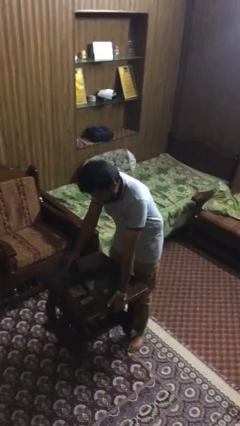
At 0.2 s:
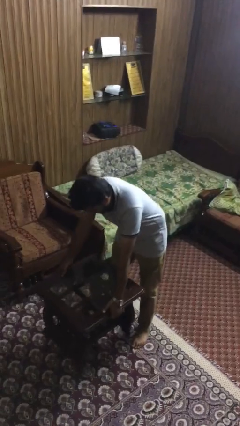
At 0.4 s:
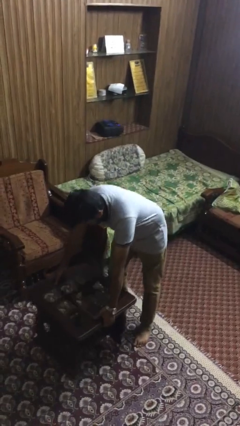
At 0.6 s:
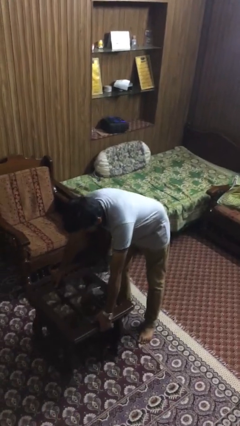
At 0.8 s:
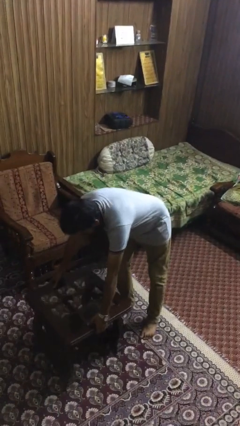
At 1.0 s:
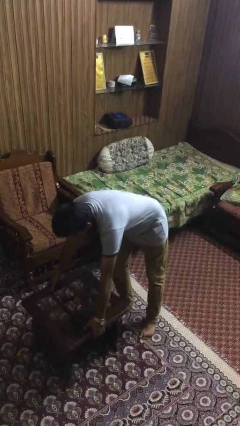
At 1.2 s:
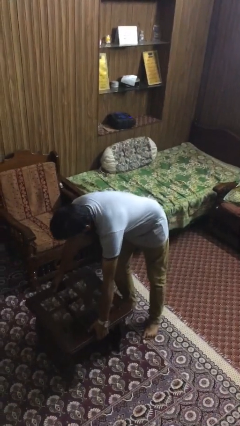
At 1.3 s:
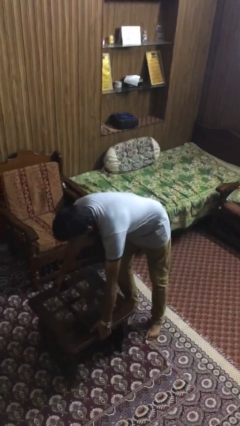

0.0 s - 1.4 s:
person puts down object on floor

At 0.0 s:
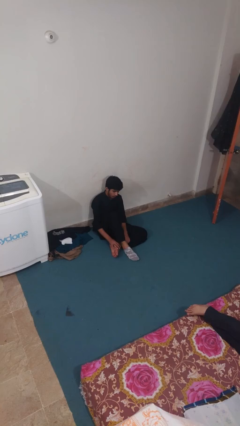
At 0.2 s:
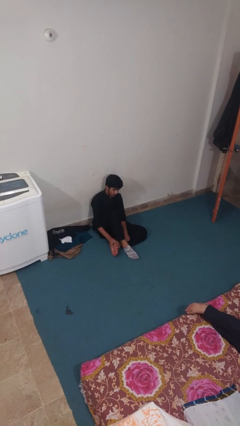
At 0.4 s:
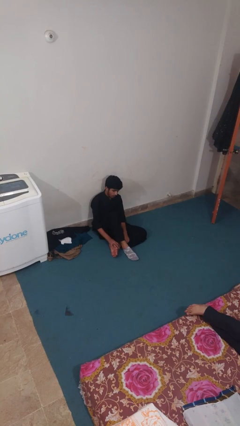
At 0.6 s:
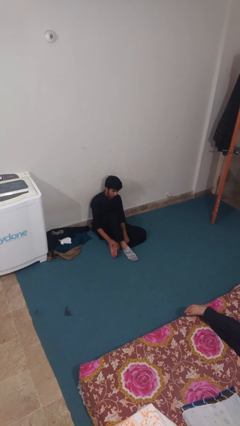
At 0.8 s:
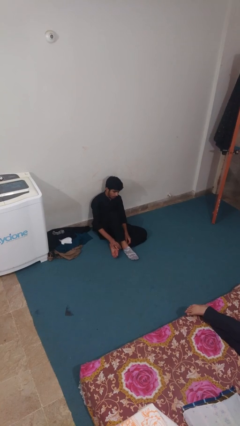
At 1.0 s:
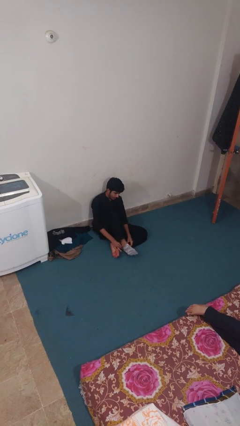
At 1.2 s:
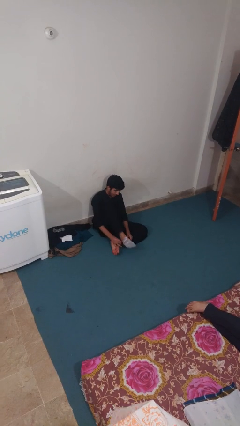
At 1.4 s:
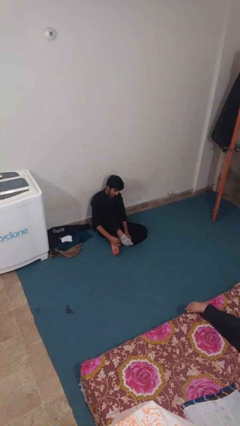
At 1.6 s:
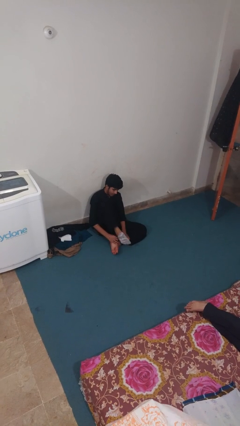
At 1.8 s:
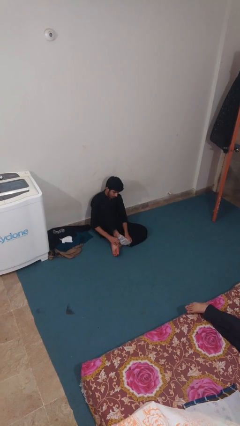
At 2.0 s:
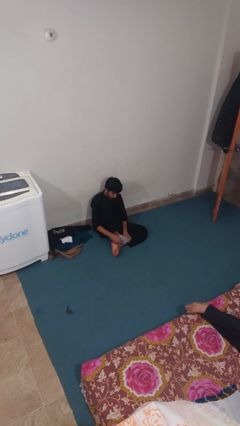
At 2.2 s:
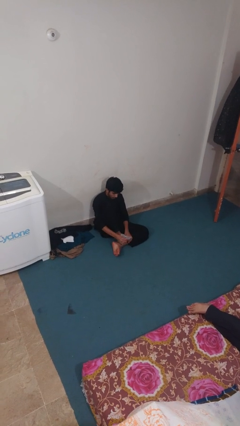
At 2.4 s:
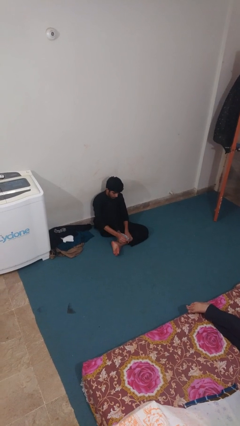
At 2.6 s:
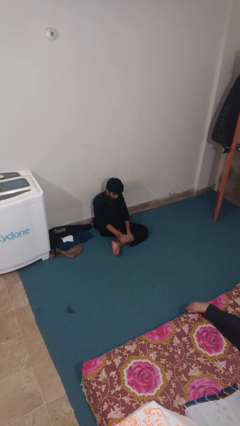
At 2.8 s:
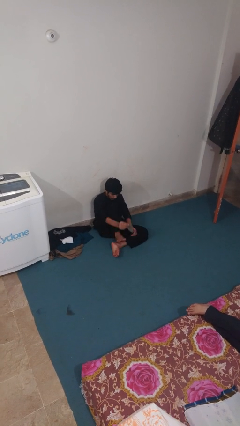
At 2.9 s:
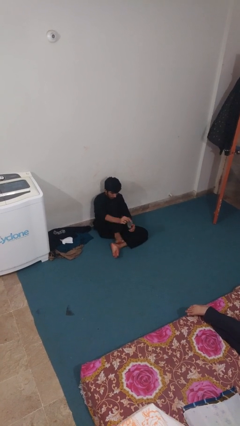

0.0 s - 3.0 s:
person takes off socks

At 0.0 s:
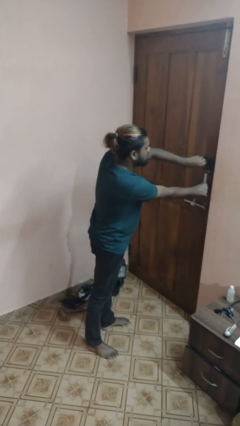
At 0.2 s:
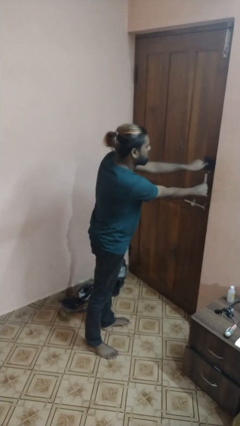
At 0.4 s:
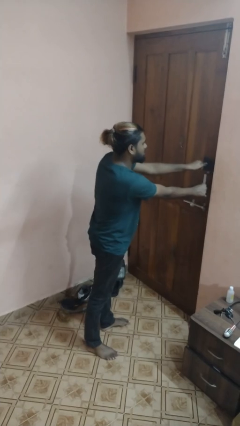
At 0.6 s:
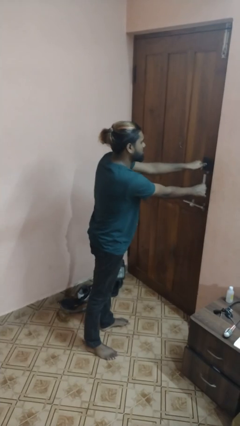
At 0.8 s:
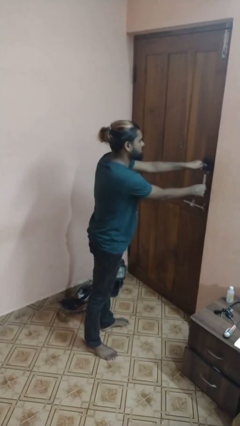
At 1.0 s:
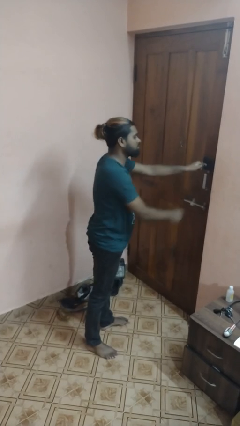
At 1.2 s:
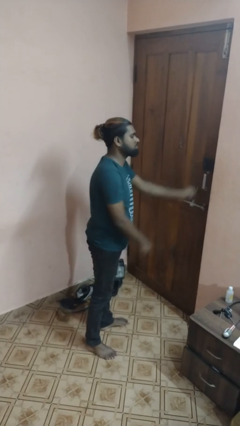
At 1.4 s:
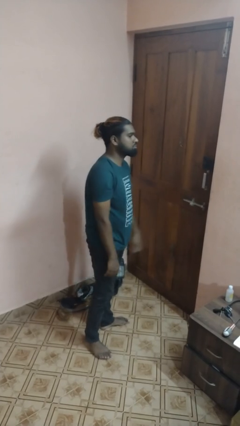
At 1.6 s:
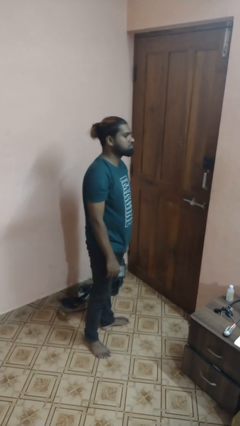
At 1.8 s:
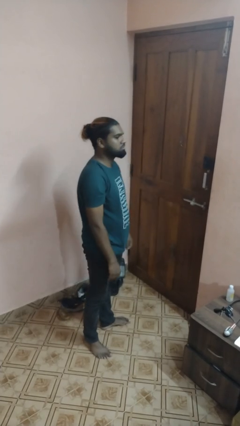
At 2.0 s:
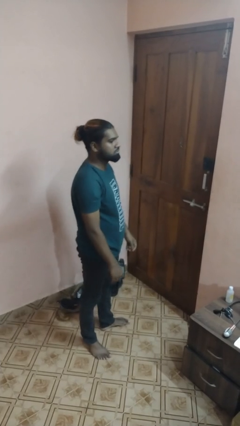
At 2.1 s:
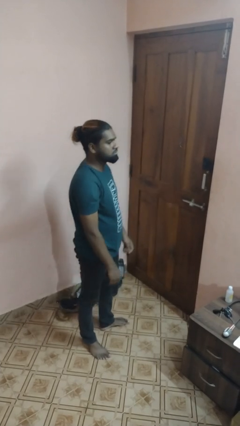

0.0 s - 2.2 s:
person locks door with keys

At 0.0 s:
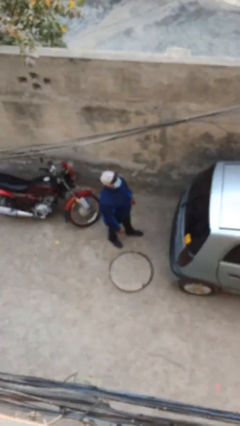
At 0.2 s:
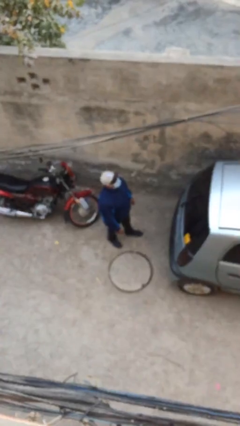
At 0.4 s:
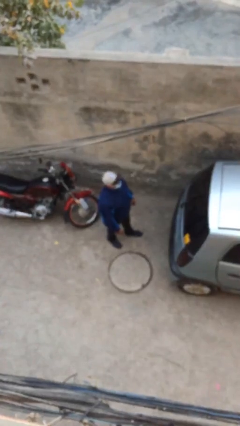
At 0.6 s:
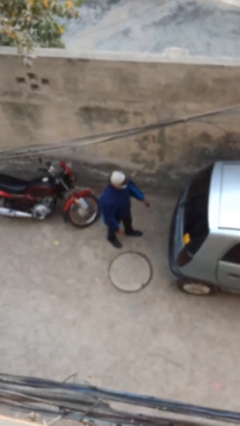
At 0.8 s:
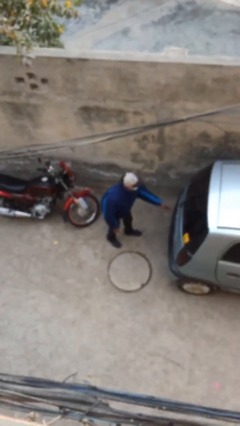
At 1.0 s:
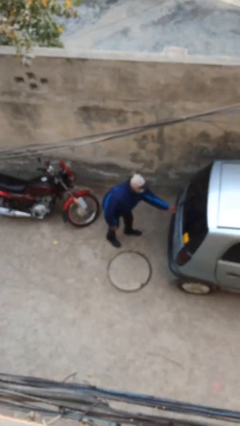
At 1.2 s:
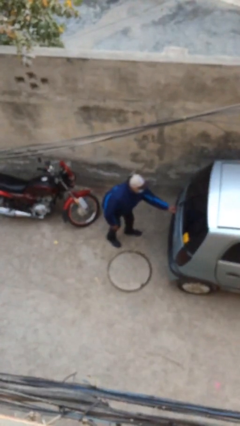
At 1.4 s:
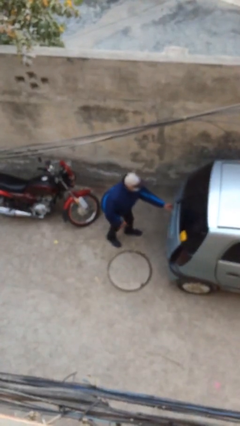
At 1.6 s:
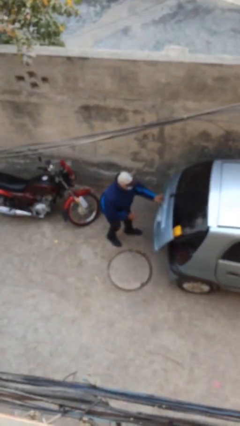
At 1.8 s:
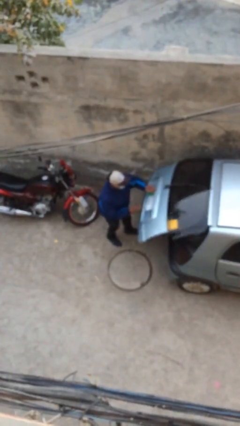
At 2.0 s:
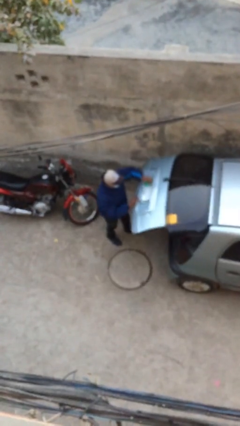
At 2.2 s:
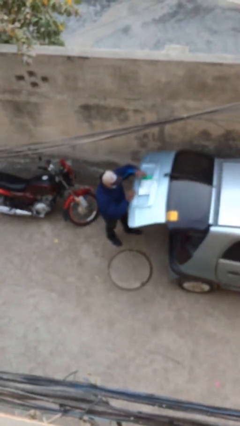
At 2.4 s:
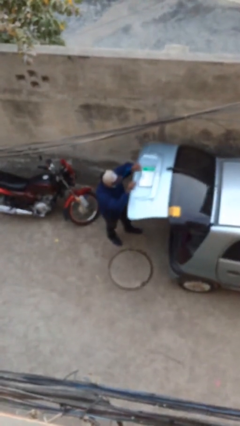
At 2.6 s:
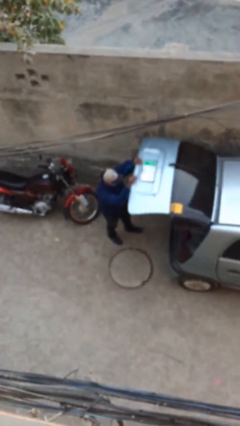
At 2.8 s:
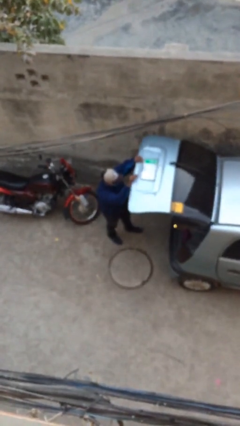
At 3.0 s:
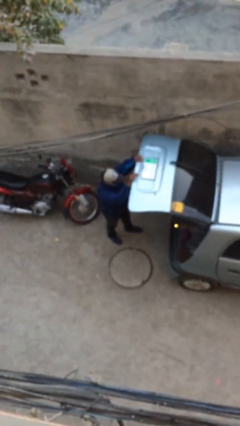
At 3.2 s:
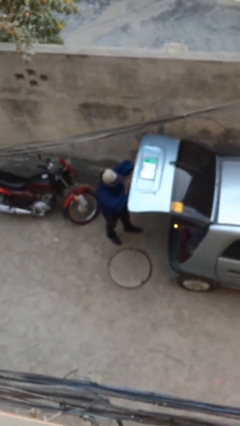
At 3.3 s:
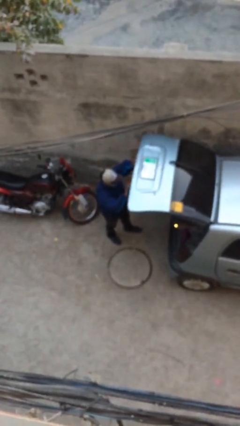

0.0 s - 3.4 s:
person opens car trunk

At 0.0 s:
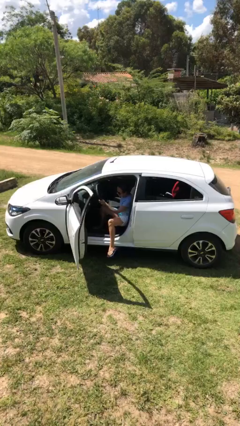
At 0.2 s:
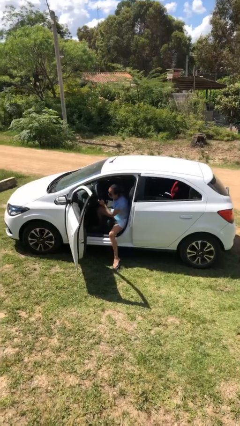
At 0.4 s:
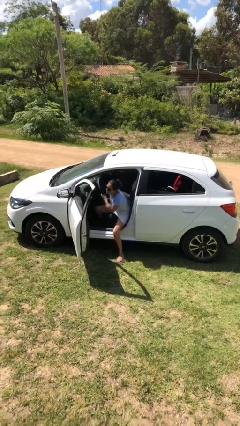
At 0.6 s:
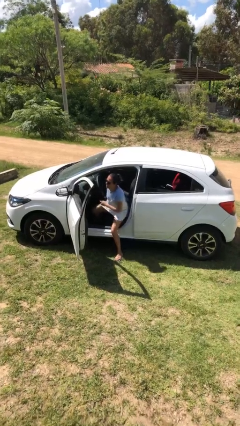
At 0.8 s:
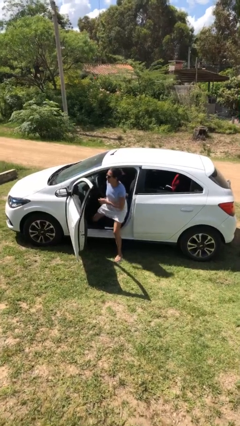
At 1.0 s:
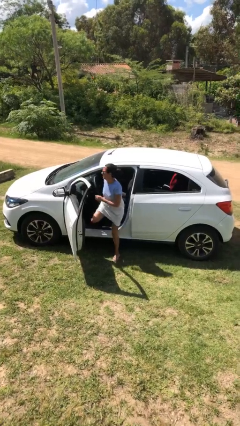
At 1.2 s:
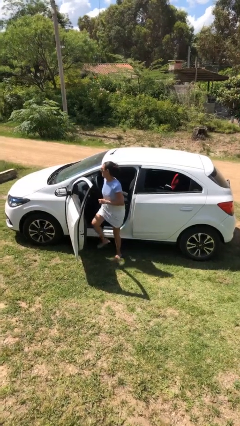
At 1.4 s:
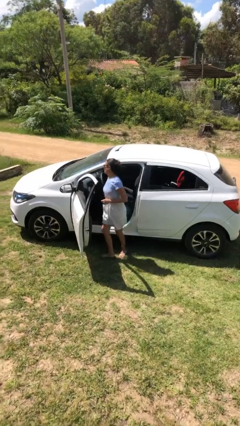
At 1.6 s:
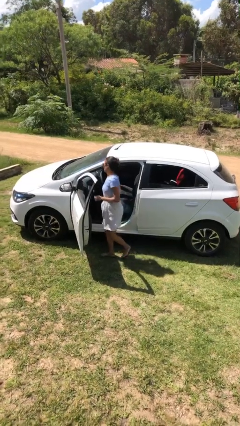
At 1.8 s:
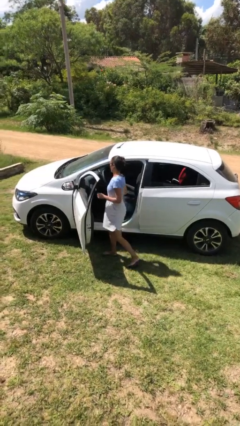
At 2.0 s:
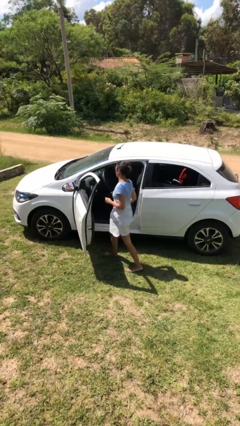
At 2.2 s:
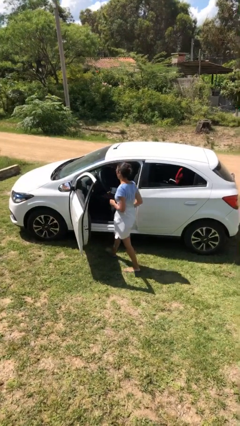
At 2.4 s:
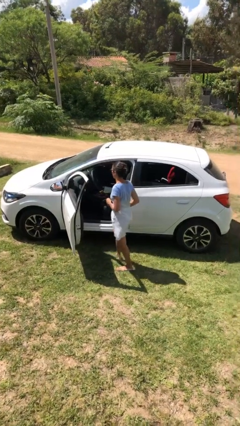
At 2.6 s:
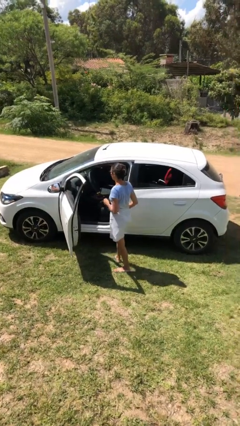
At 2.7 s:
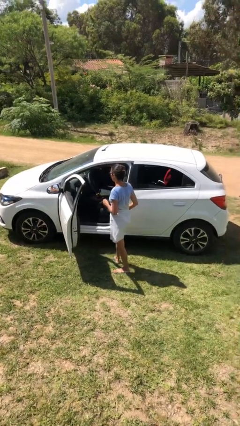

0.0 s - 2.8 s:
person exits car

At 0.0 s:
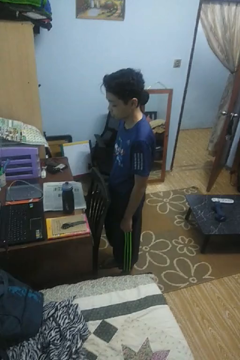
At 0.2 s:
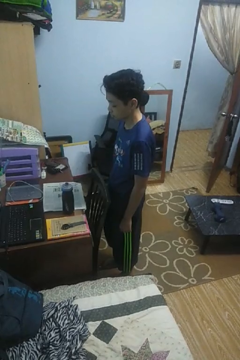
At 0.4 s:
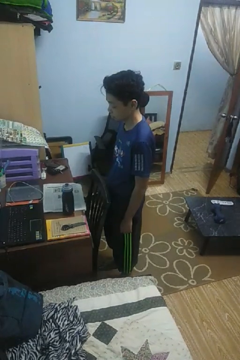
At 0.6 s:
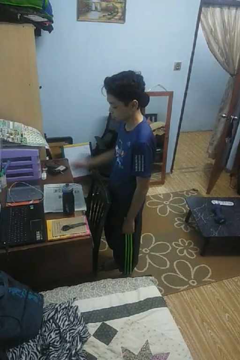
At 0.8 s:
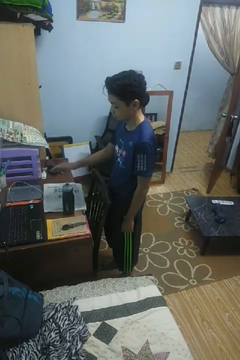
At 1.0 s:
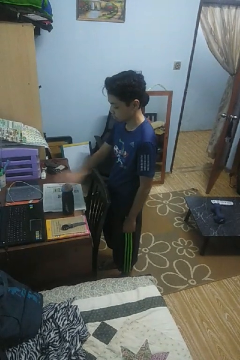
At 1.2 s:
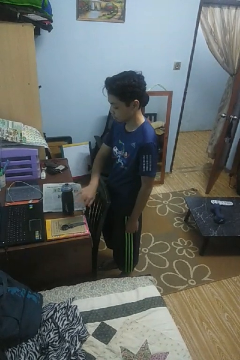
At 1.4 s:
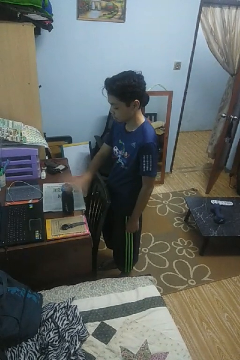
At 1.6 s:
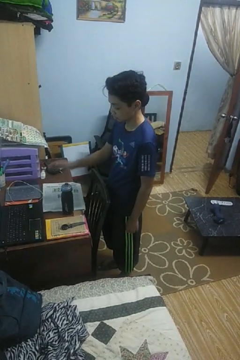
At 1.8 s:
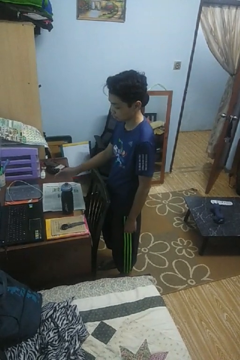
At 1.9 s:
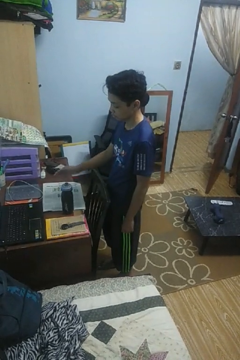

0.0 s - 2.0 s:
person waves hand over object

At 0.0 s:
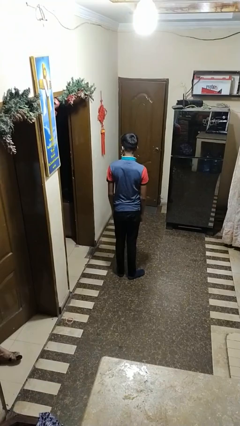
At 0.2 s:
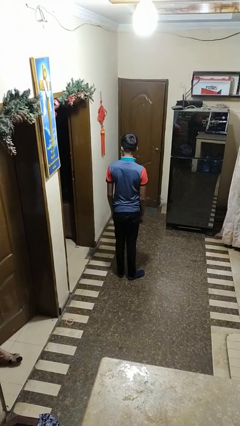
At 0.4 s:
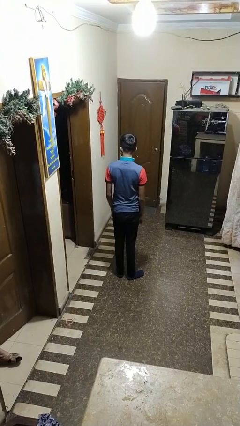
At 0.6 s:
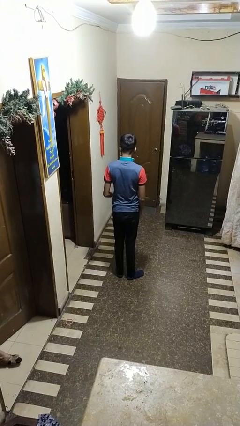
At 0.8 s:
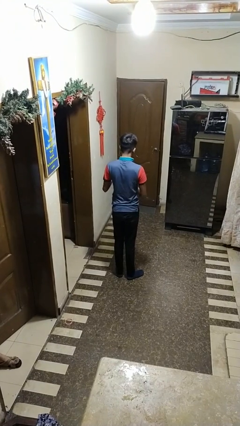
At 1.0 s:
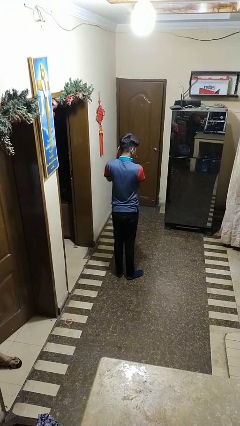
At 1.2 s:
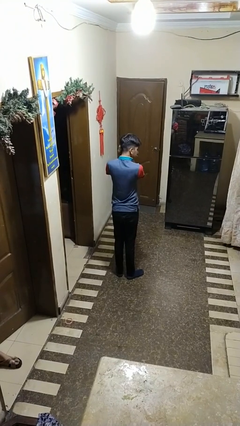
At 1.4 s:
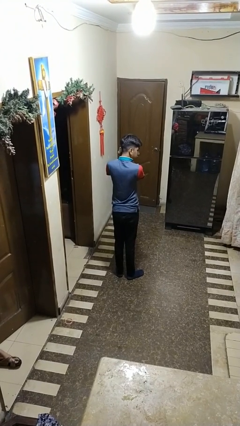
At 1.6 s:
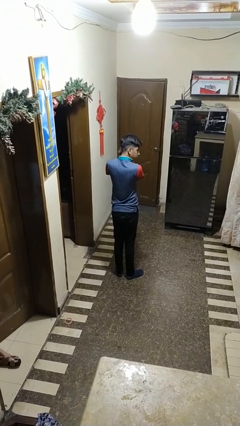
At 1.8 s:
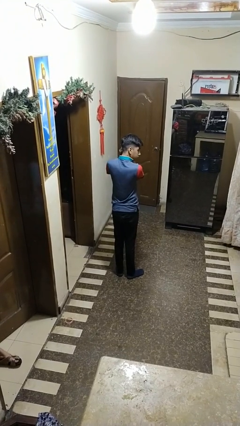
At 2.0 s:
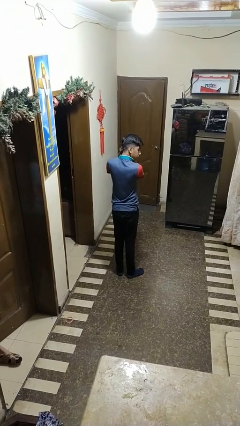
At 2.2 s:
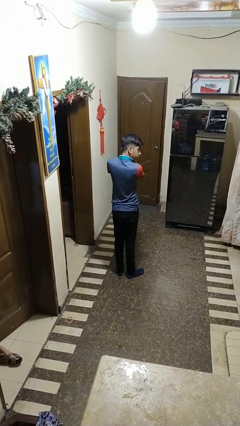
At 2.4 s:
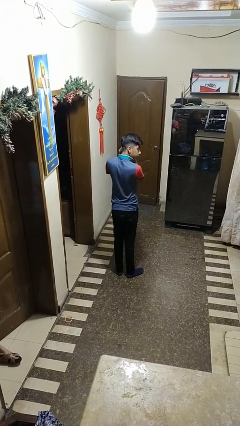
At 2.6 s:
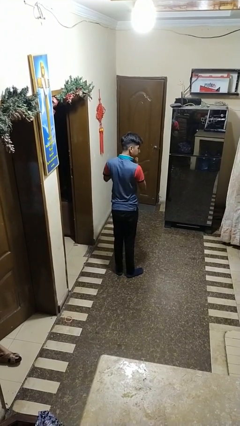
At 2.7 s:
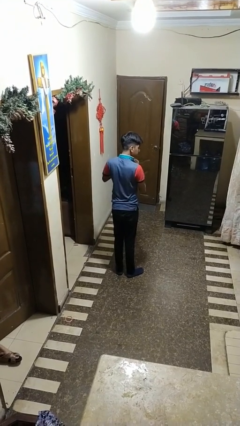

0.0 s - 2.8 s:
person takes off earrings
